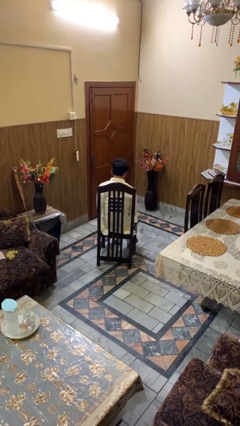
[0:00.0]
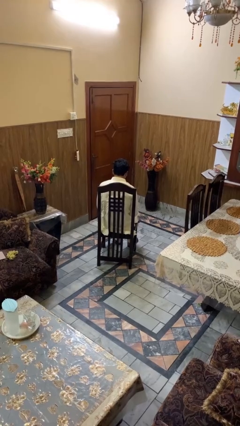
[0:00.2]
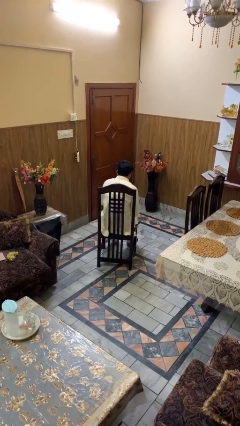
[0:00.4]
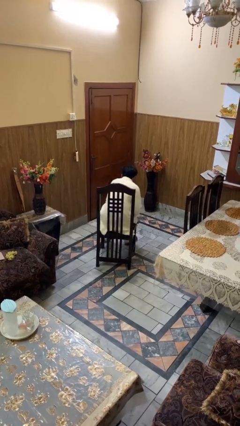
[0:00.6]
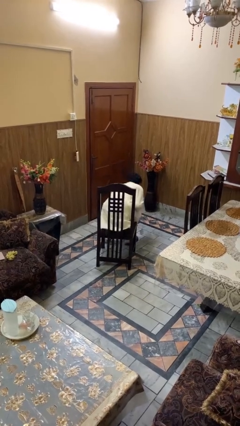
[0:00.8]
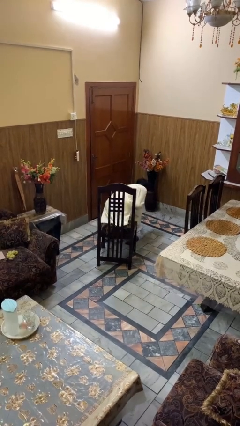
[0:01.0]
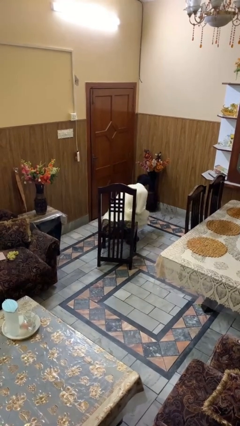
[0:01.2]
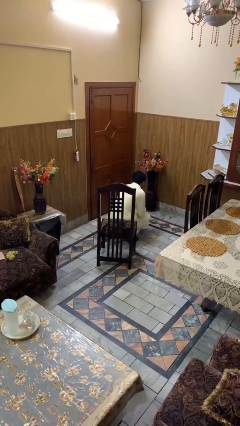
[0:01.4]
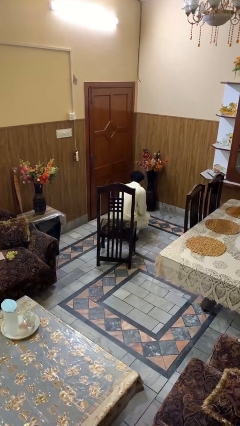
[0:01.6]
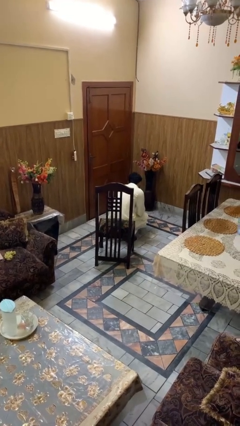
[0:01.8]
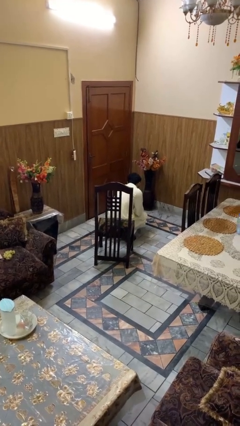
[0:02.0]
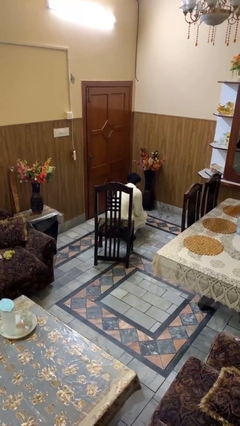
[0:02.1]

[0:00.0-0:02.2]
person falls from chair

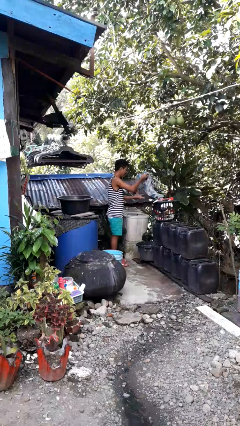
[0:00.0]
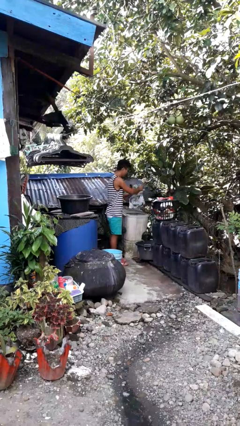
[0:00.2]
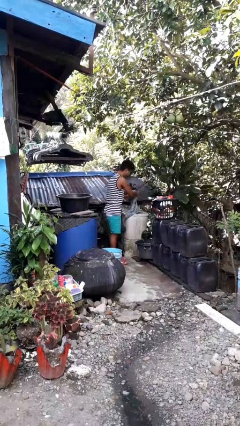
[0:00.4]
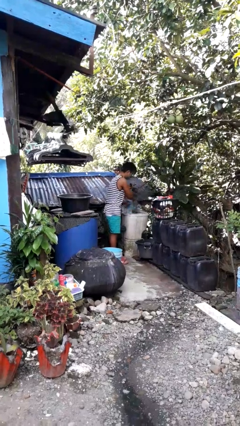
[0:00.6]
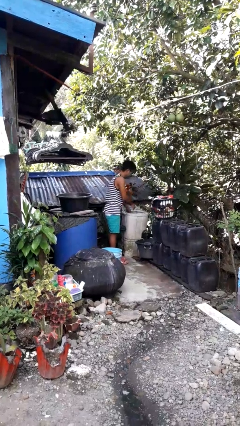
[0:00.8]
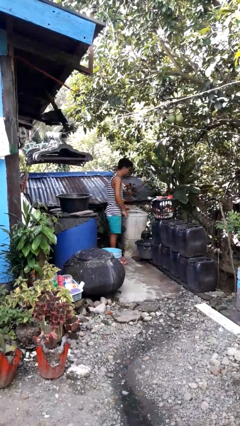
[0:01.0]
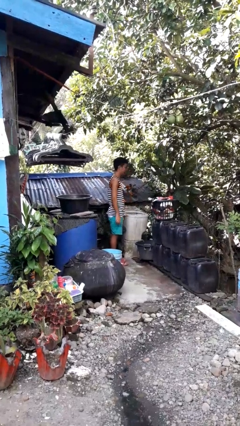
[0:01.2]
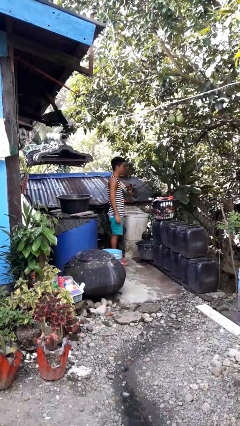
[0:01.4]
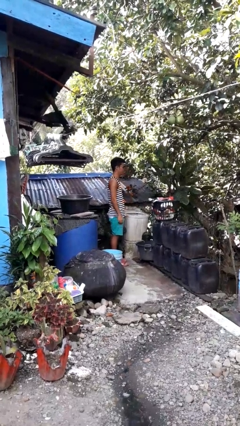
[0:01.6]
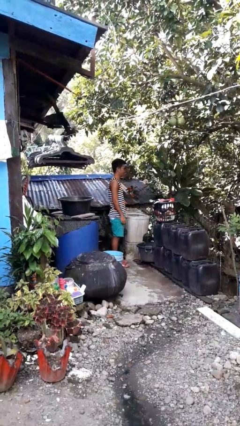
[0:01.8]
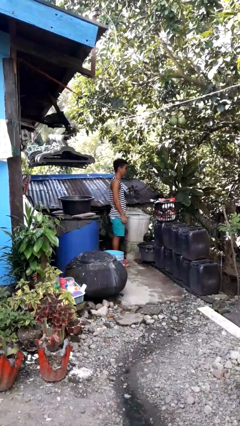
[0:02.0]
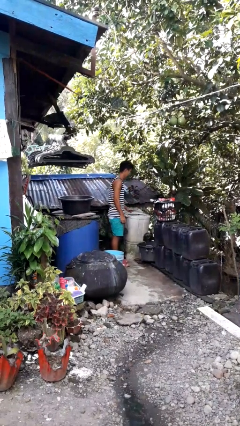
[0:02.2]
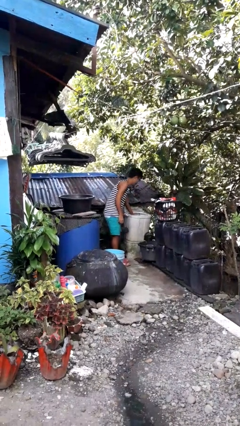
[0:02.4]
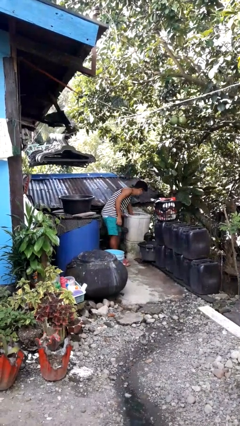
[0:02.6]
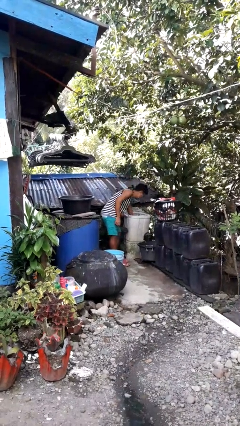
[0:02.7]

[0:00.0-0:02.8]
person loads dryer

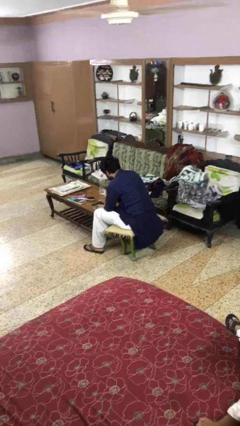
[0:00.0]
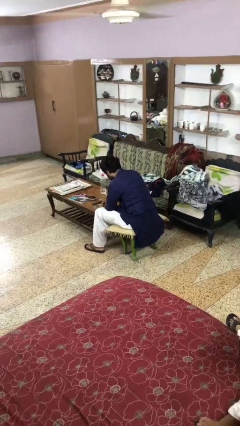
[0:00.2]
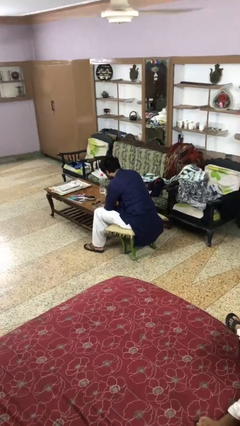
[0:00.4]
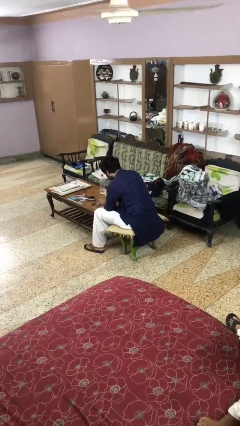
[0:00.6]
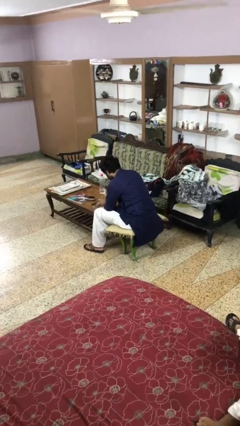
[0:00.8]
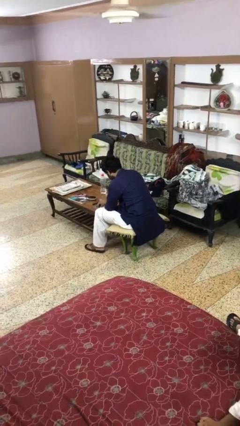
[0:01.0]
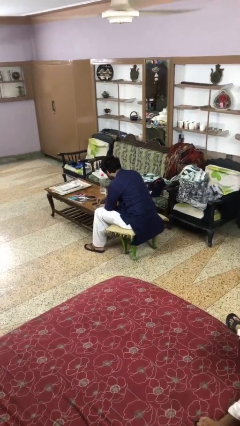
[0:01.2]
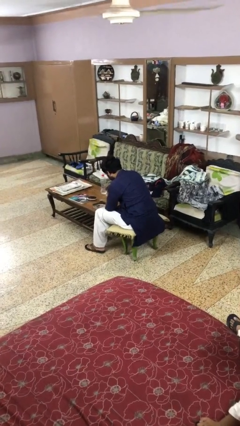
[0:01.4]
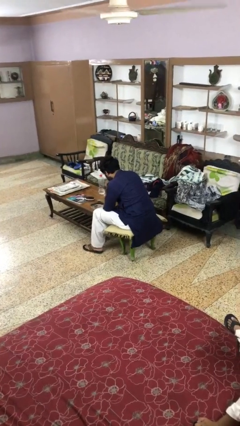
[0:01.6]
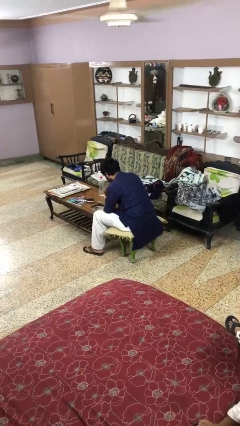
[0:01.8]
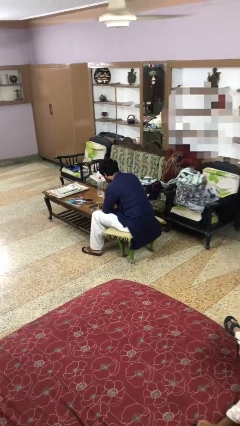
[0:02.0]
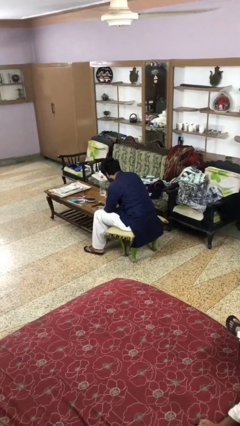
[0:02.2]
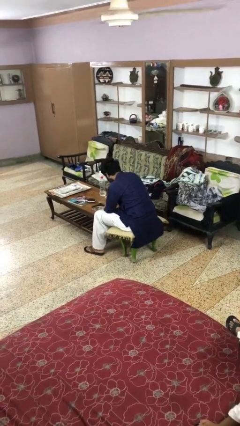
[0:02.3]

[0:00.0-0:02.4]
person eats with hands

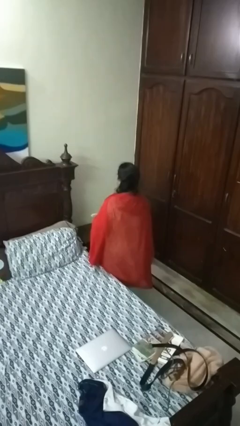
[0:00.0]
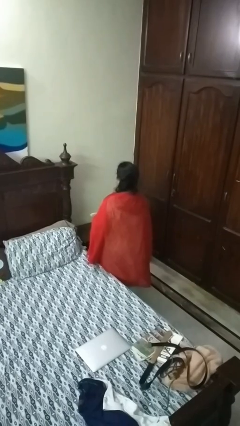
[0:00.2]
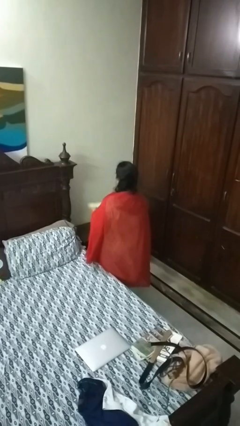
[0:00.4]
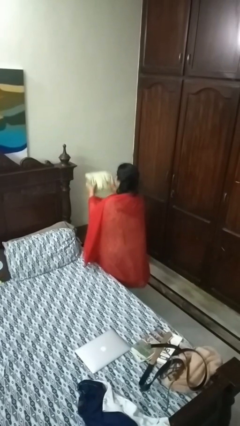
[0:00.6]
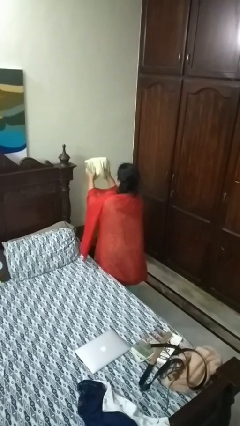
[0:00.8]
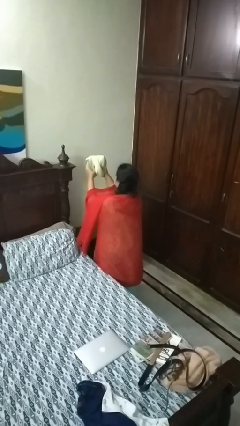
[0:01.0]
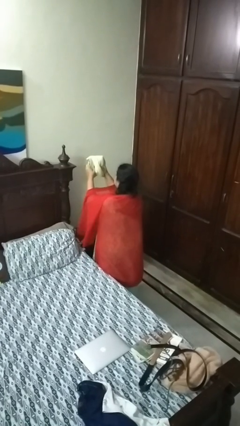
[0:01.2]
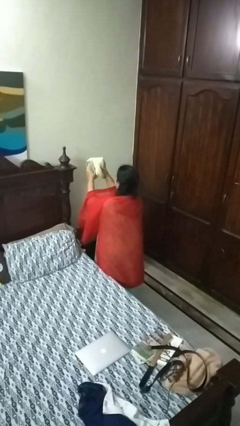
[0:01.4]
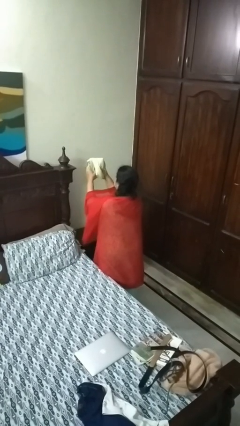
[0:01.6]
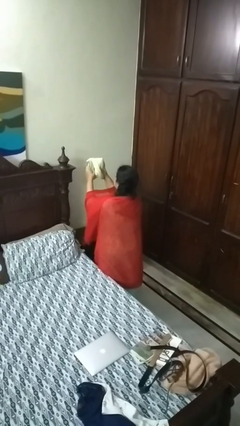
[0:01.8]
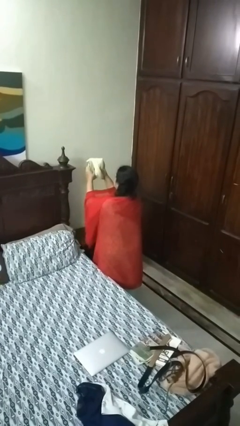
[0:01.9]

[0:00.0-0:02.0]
person squeezes object

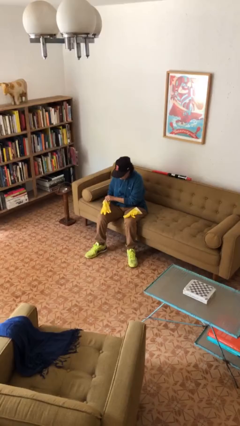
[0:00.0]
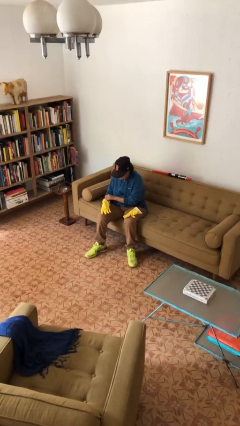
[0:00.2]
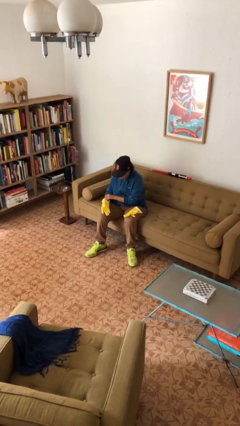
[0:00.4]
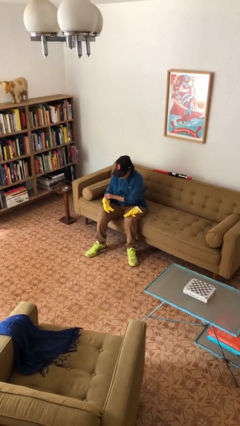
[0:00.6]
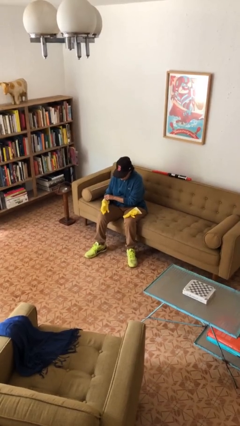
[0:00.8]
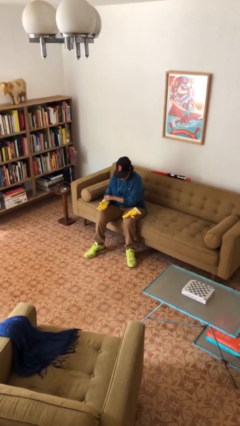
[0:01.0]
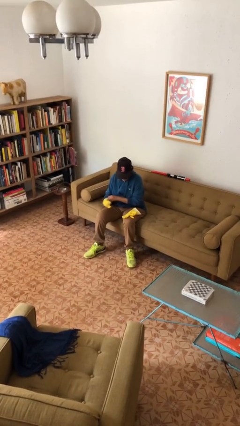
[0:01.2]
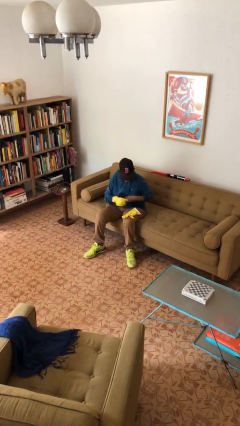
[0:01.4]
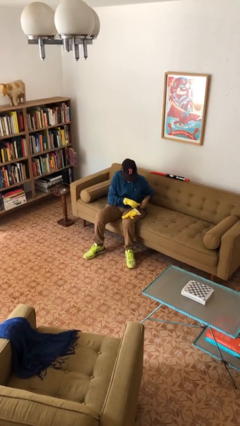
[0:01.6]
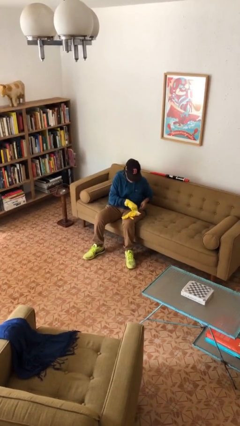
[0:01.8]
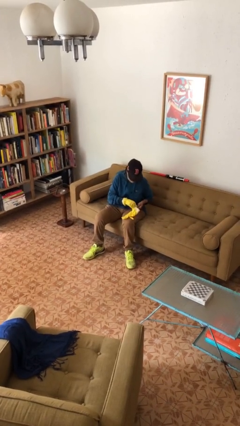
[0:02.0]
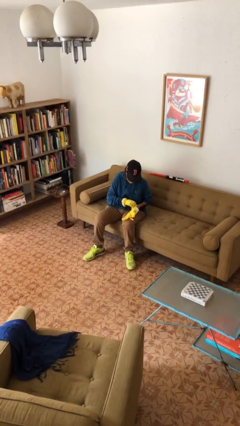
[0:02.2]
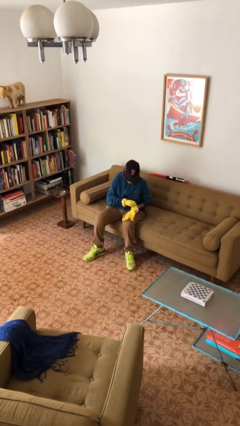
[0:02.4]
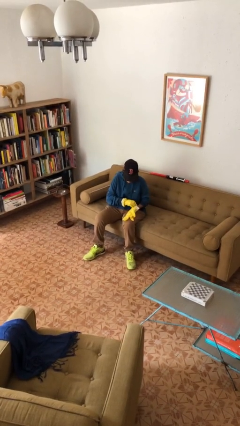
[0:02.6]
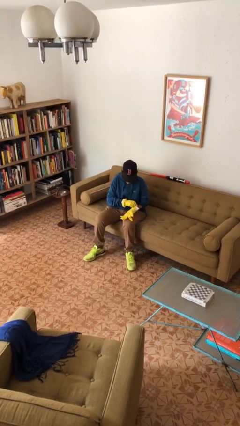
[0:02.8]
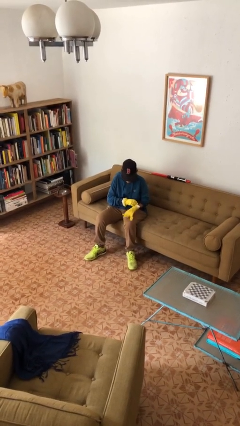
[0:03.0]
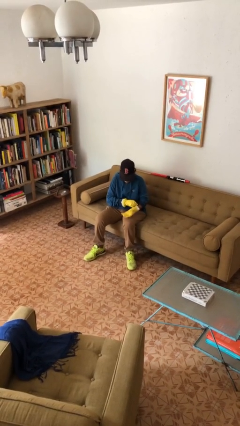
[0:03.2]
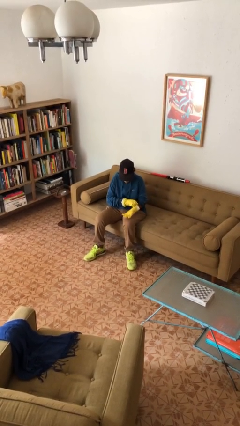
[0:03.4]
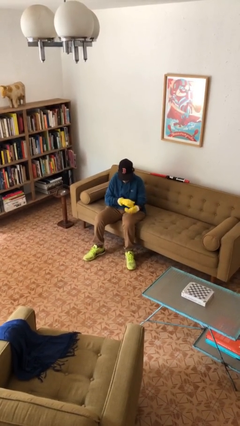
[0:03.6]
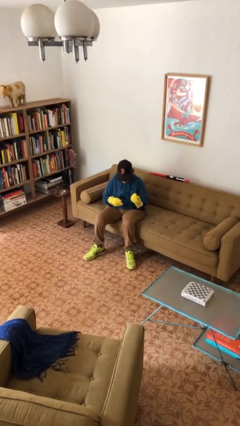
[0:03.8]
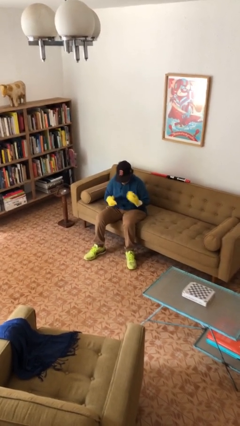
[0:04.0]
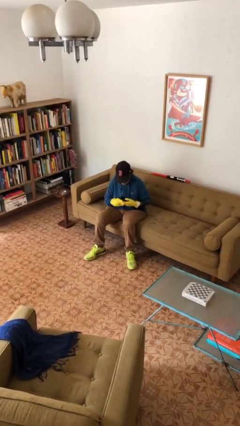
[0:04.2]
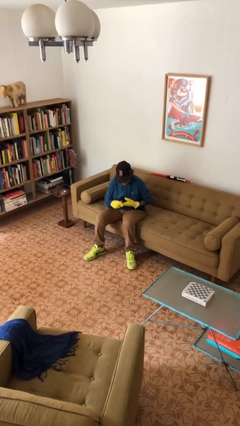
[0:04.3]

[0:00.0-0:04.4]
person puts on gloves

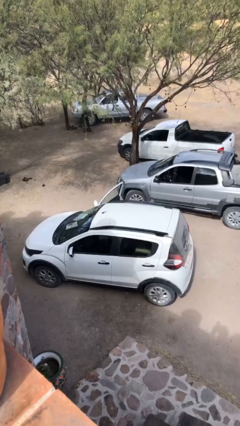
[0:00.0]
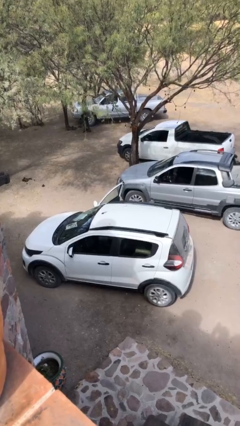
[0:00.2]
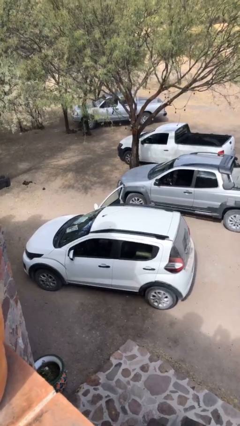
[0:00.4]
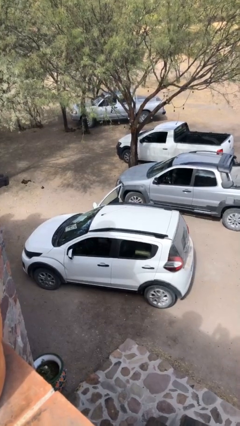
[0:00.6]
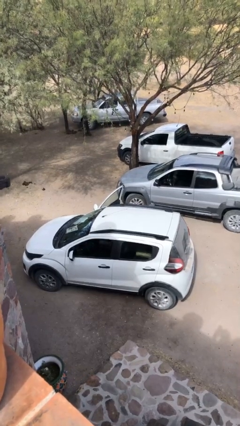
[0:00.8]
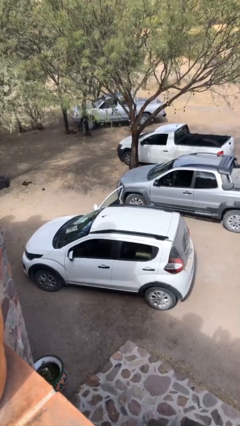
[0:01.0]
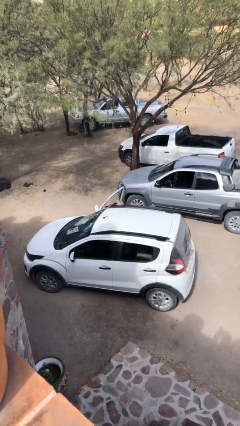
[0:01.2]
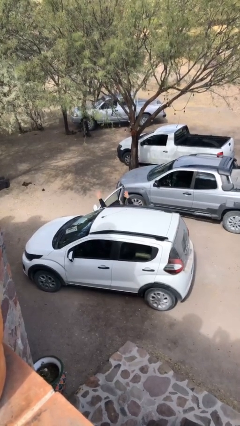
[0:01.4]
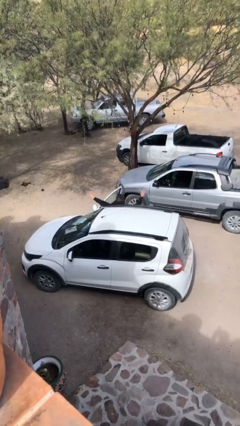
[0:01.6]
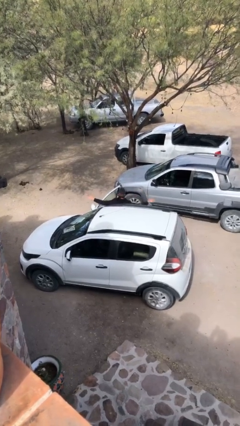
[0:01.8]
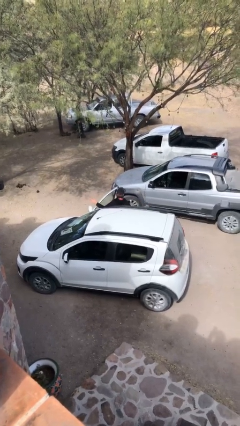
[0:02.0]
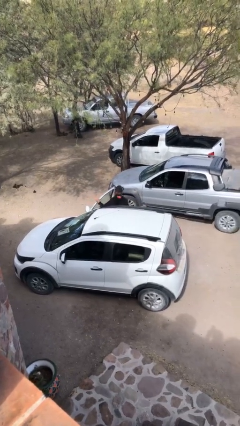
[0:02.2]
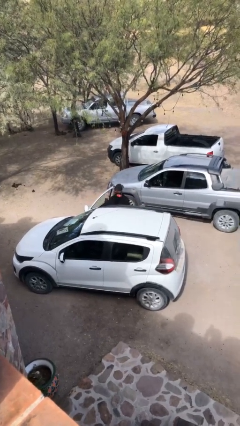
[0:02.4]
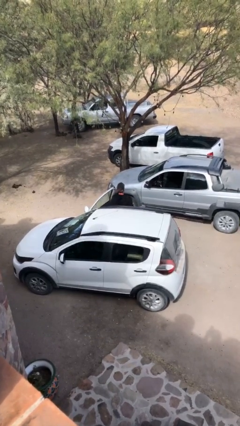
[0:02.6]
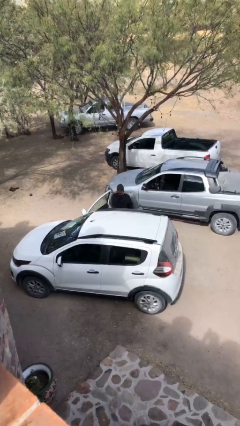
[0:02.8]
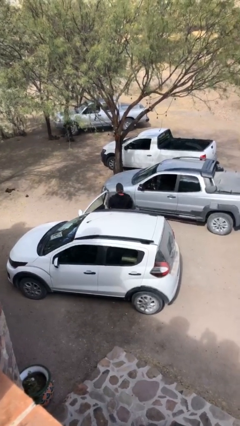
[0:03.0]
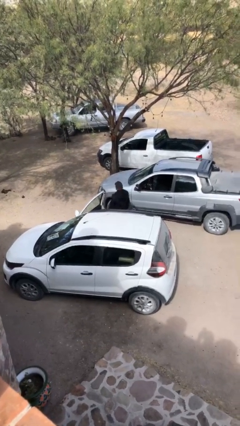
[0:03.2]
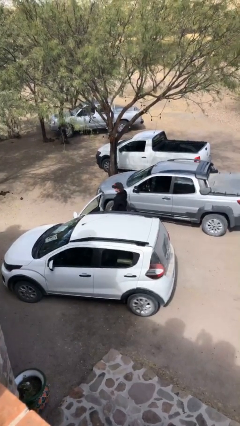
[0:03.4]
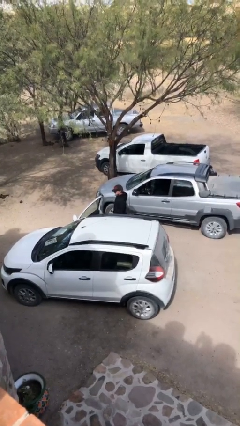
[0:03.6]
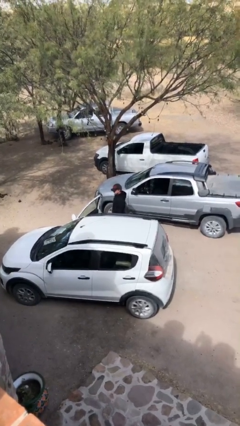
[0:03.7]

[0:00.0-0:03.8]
person exits car
